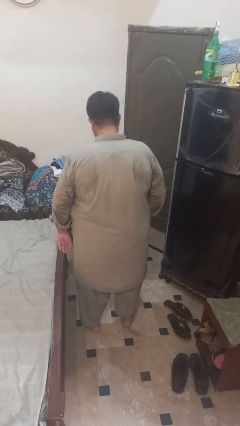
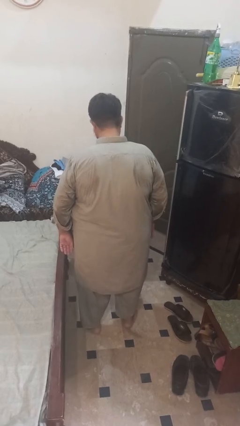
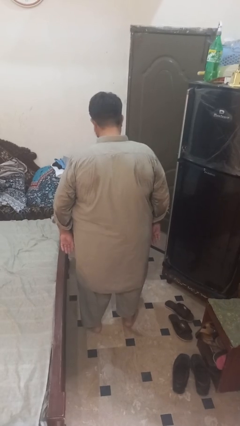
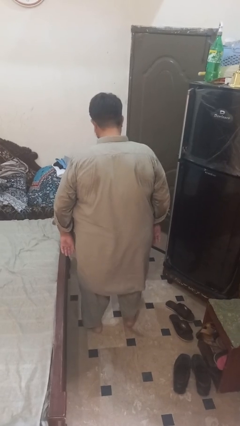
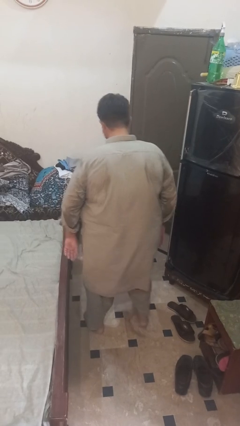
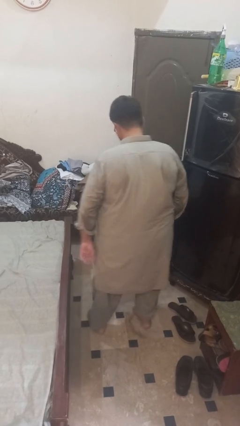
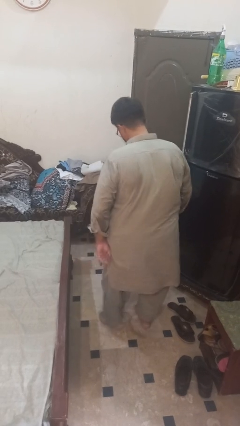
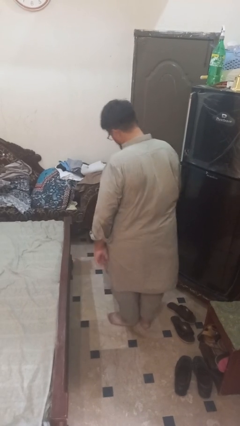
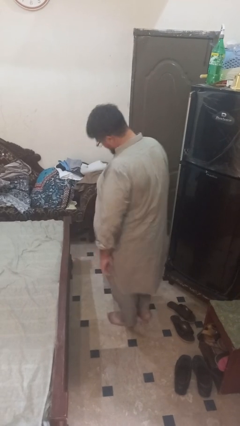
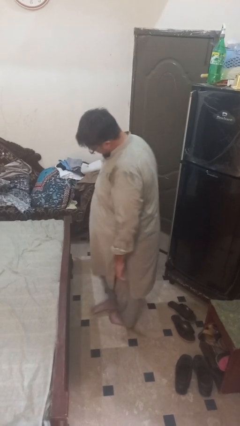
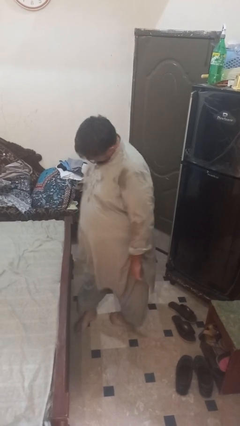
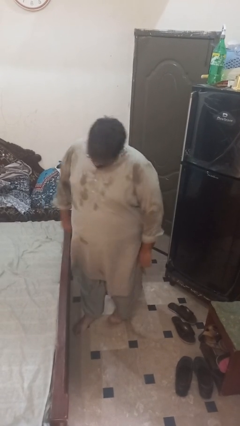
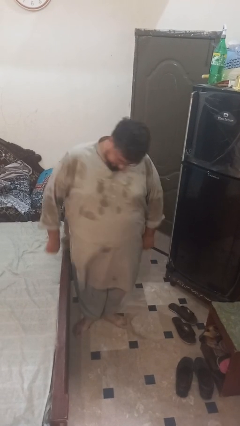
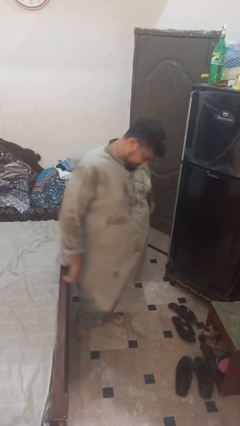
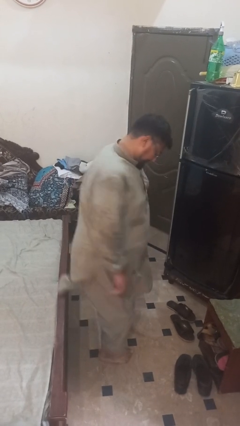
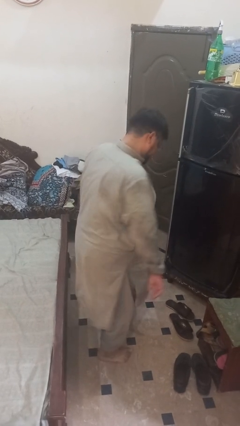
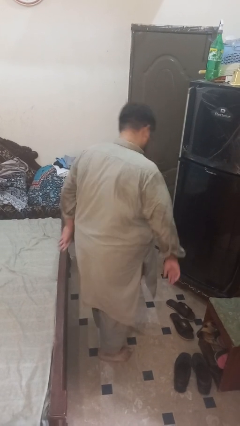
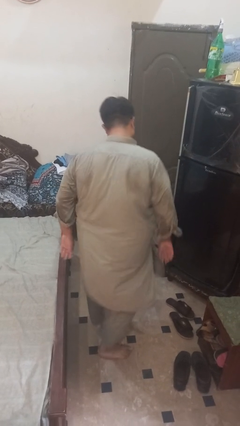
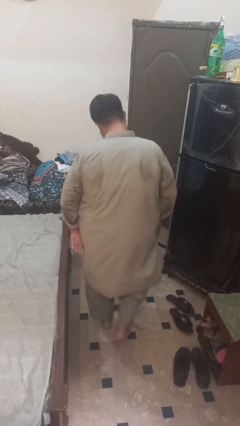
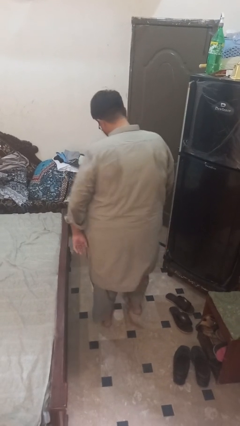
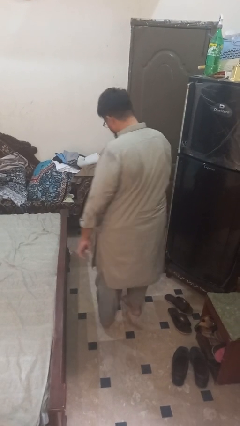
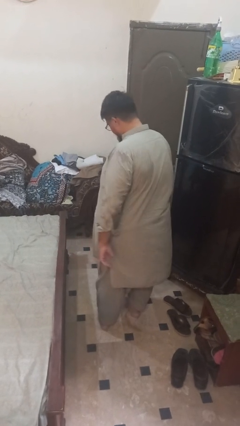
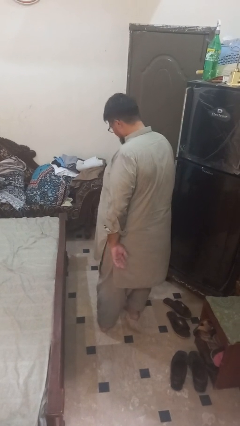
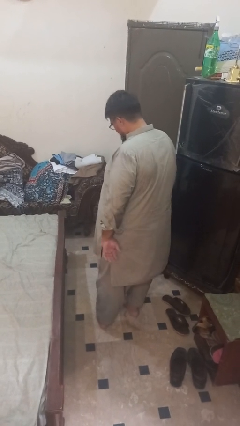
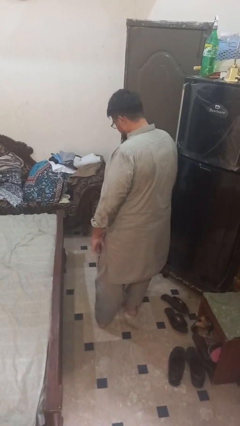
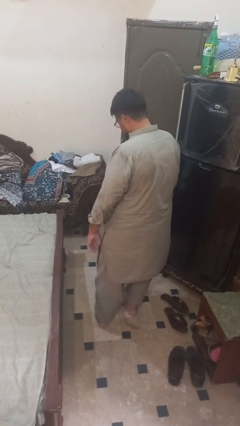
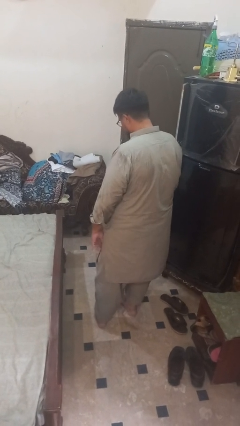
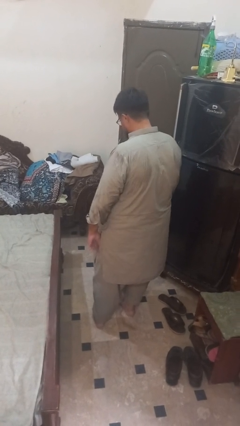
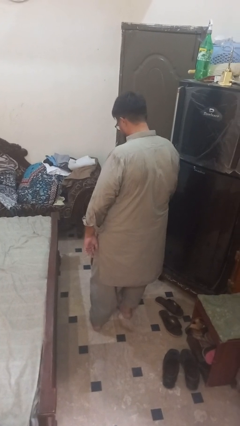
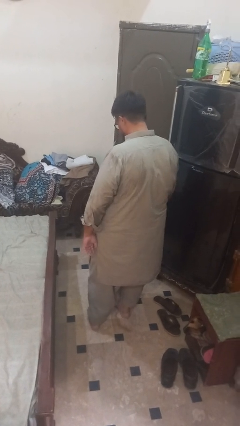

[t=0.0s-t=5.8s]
person twirls

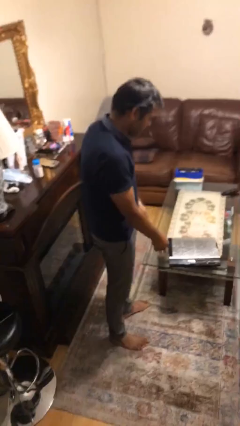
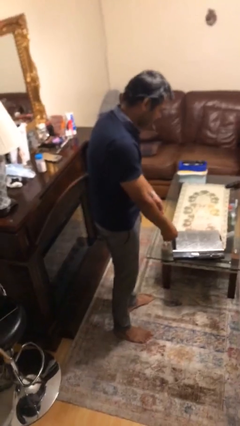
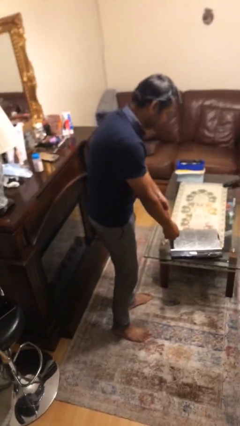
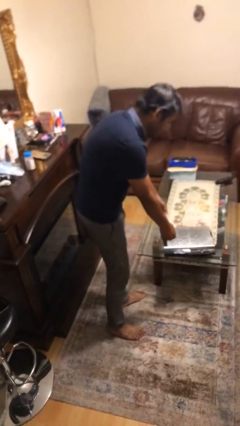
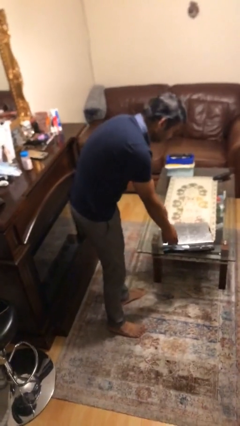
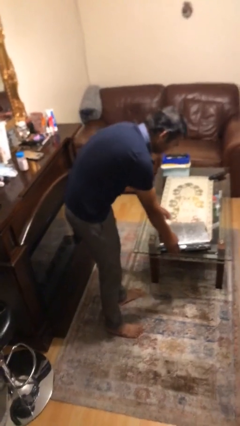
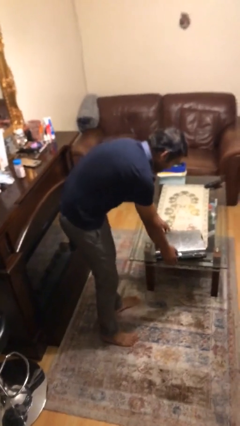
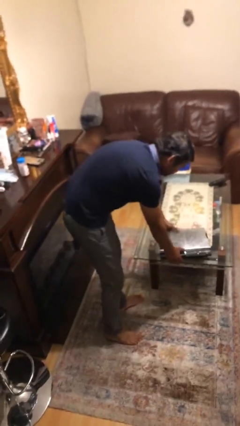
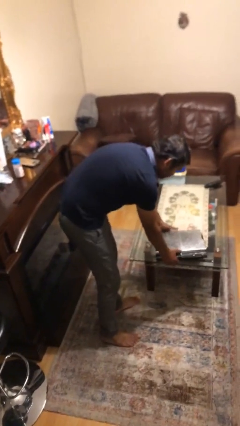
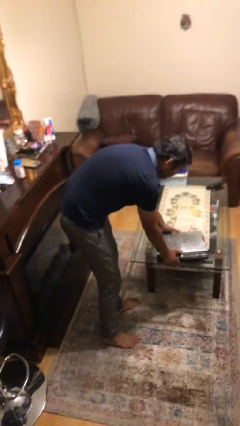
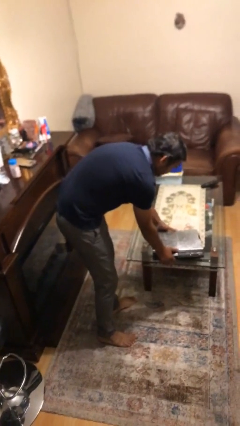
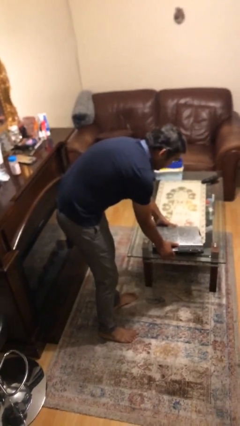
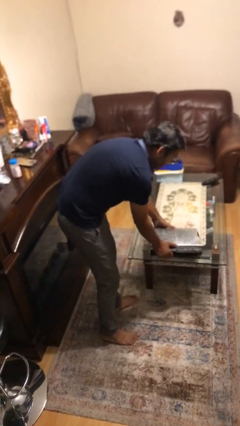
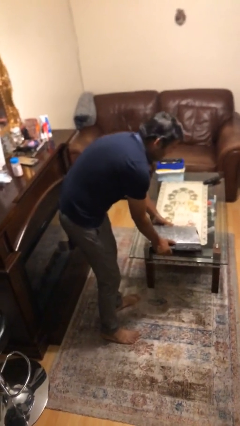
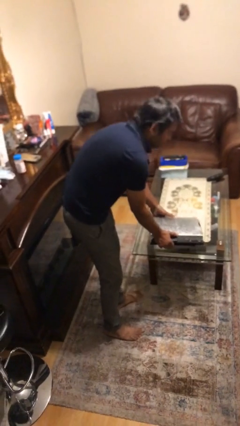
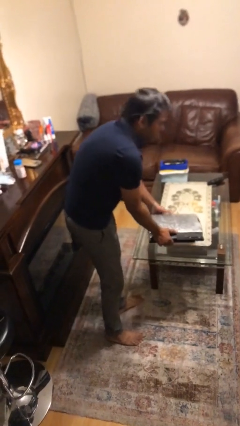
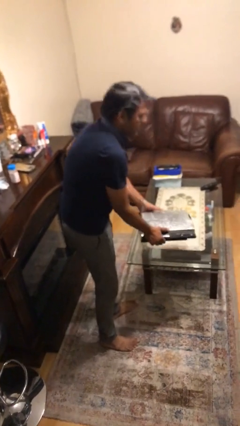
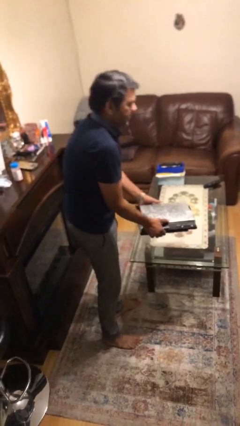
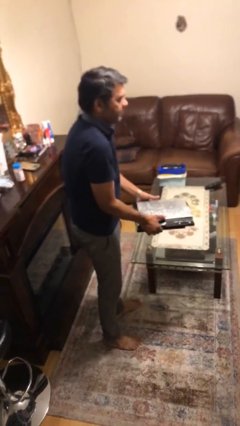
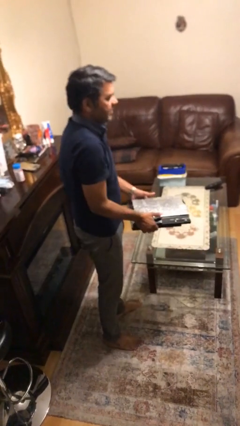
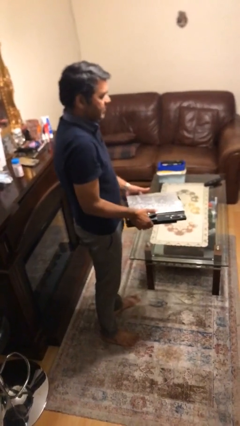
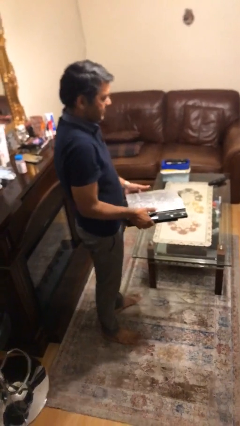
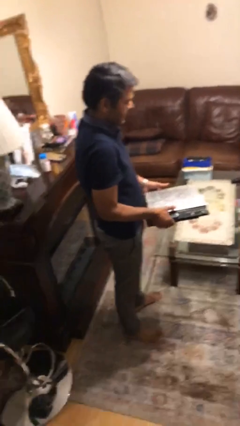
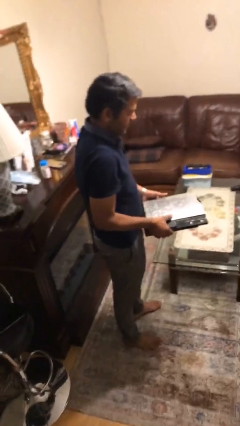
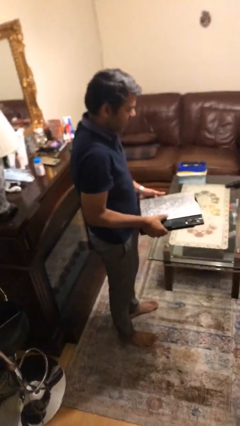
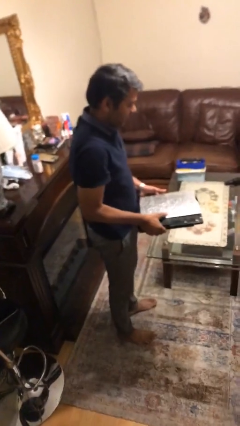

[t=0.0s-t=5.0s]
person picks up object from table

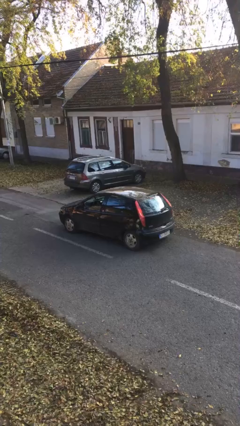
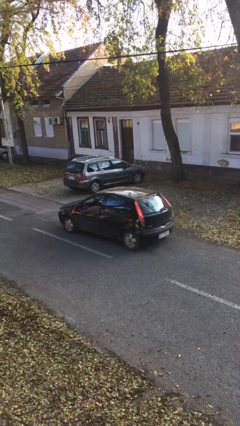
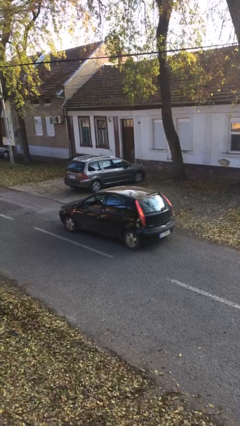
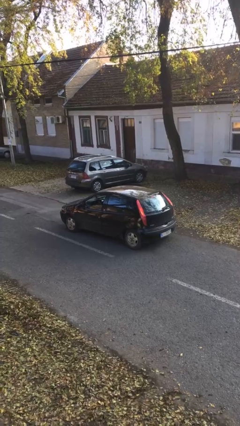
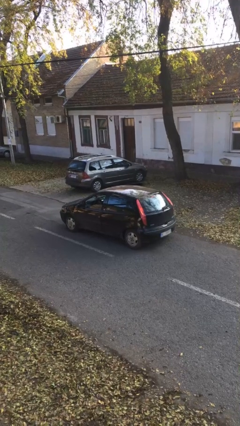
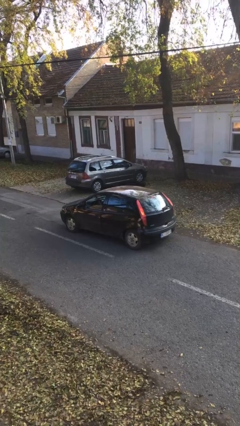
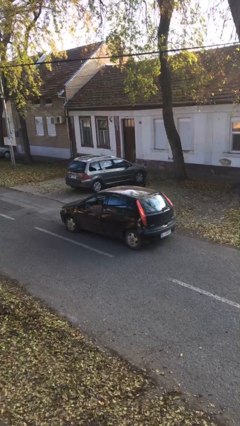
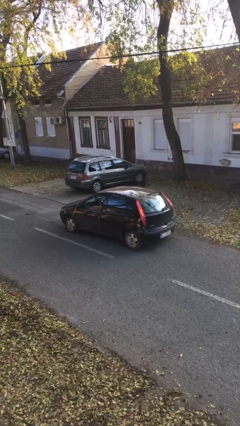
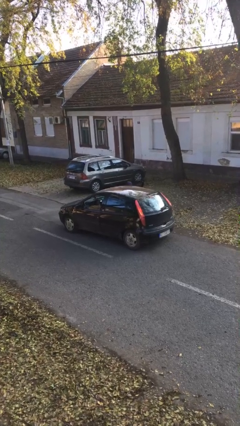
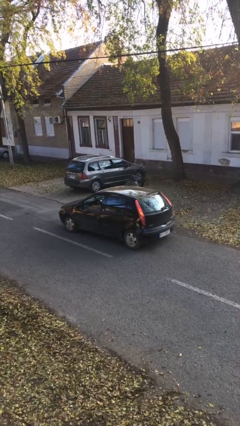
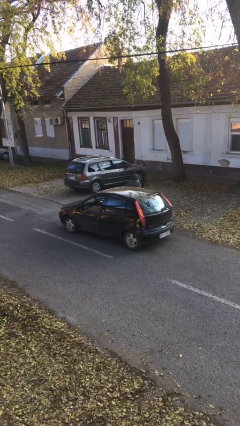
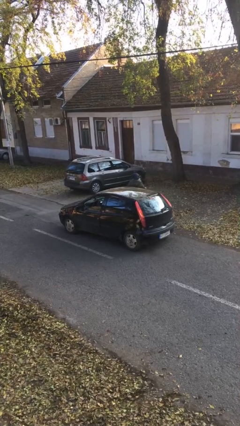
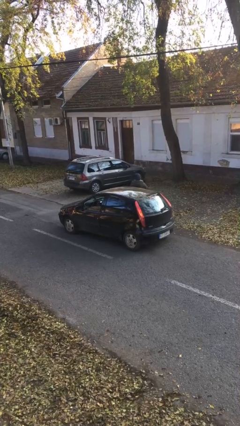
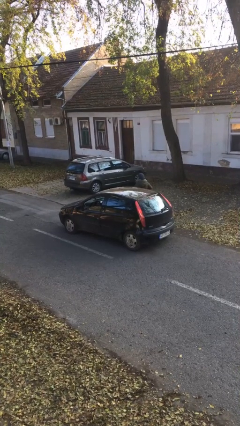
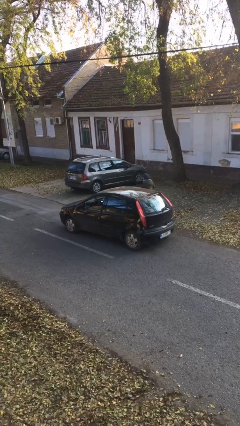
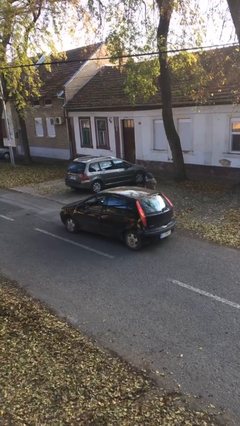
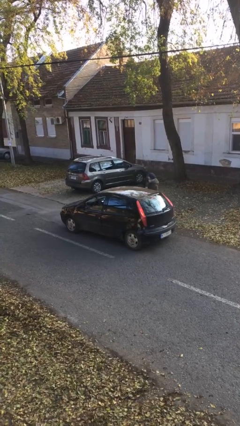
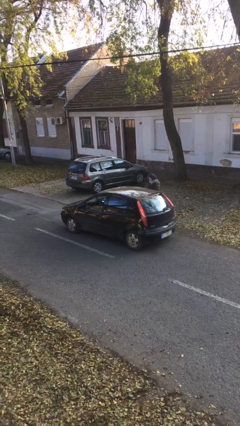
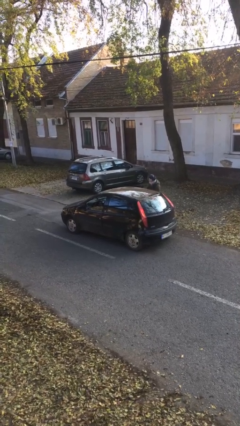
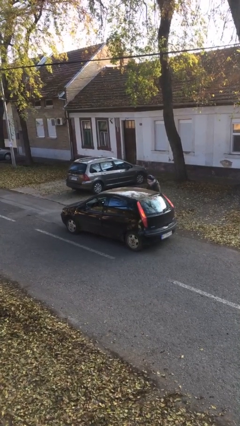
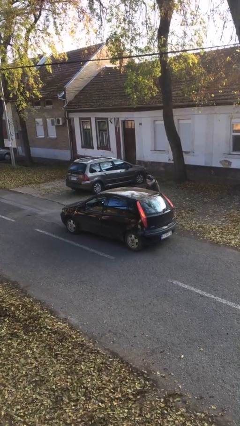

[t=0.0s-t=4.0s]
car drops off person

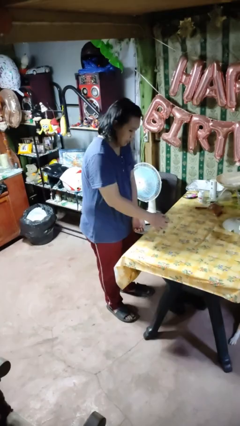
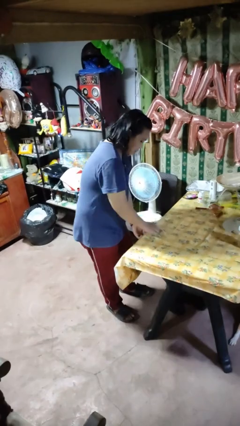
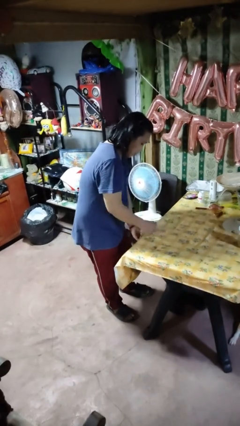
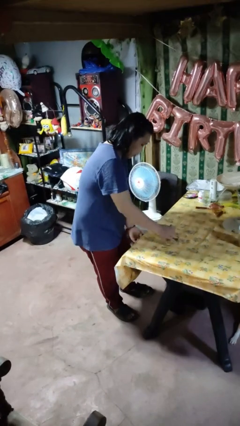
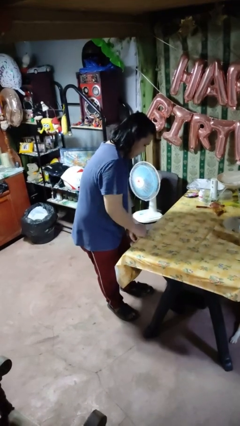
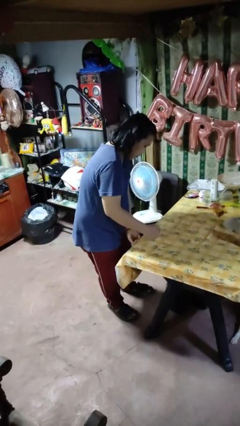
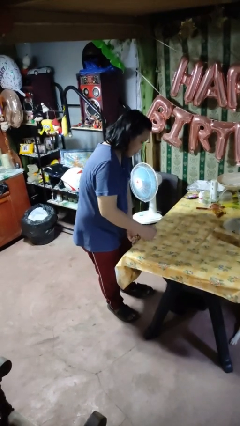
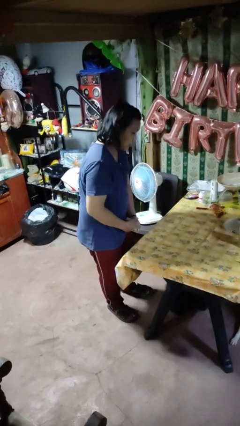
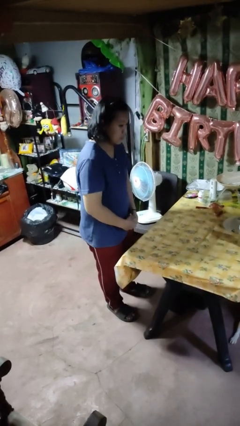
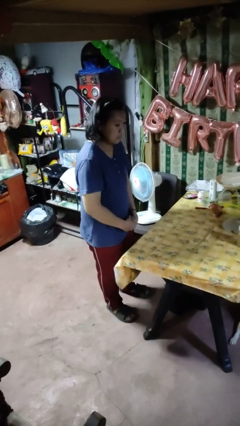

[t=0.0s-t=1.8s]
person cleans table with rag

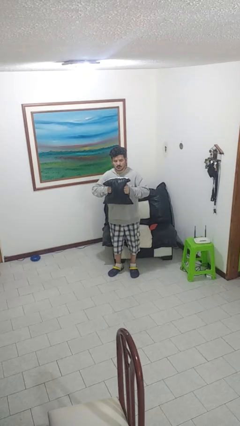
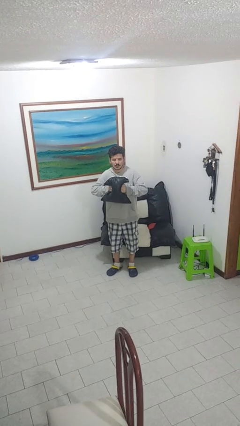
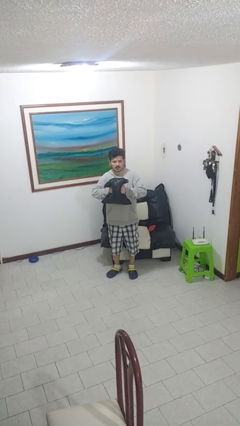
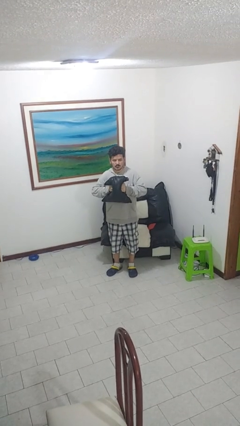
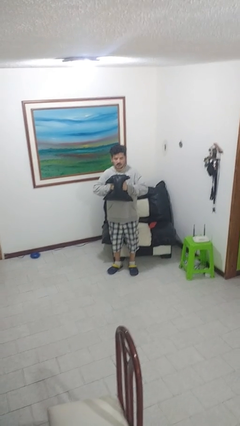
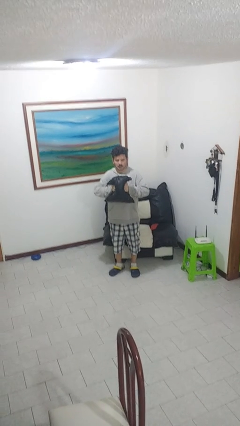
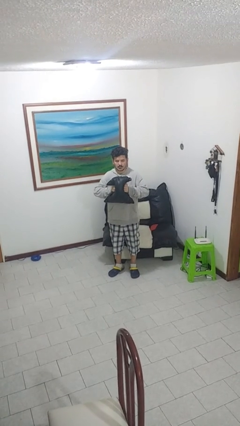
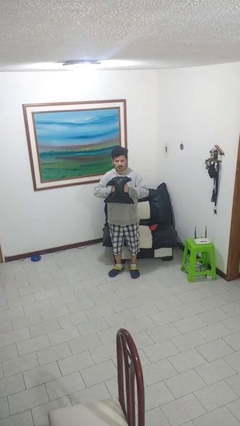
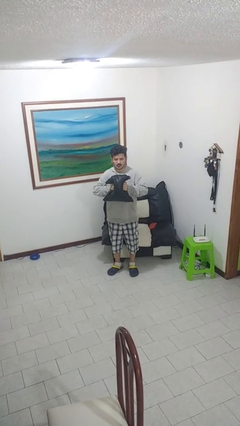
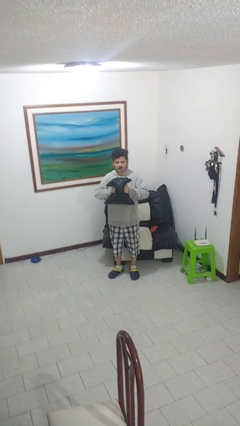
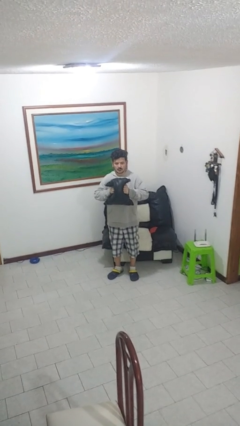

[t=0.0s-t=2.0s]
person squeezes object
